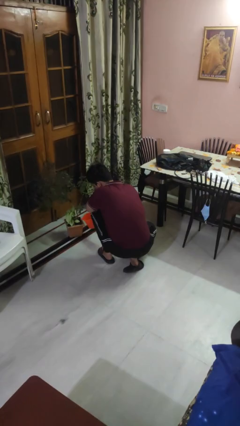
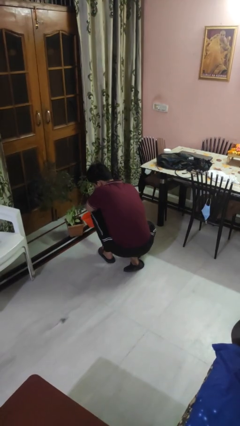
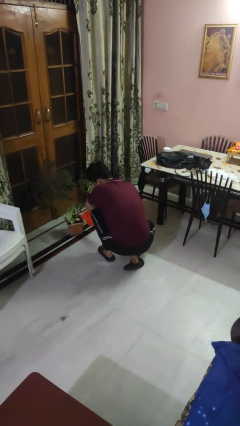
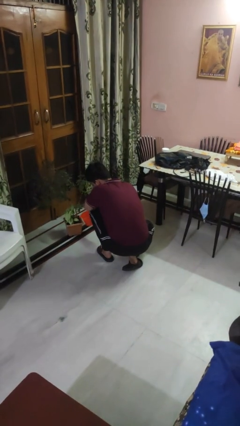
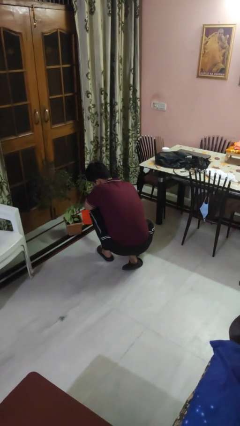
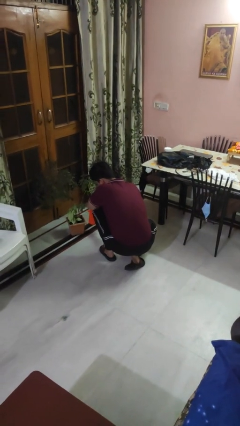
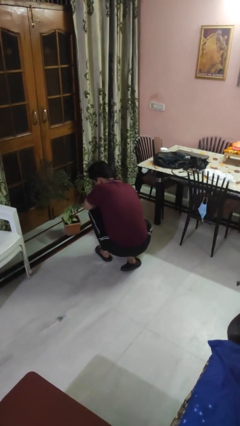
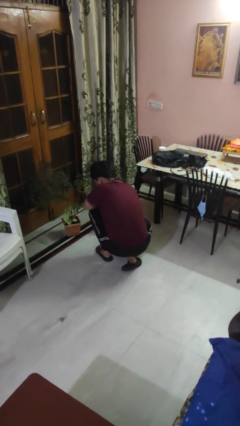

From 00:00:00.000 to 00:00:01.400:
person waters houseplant

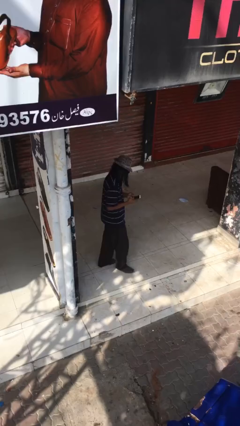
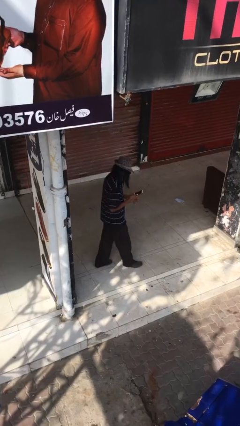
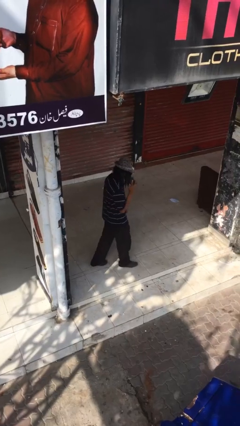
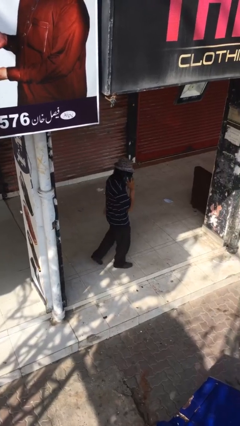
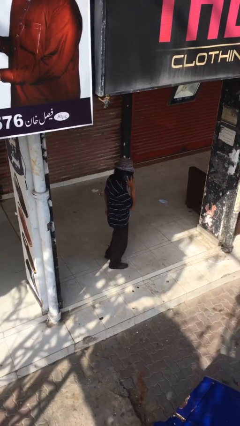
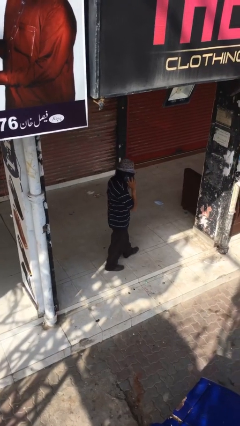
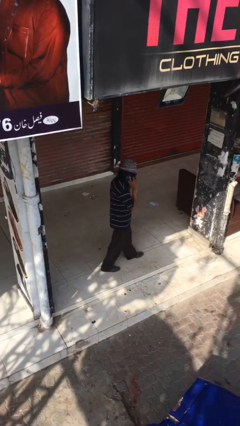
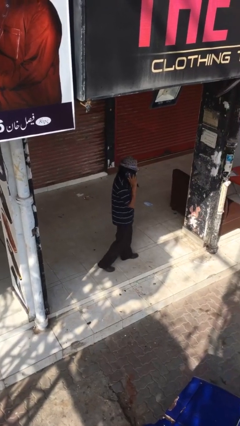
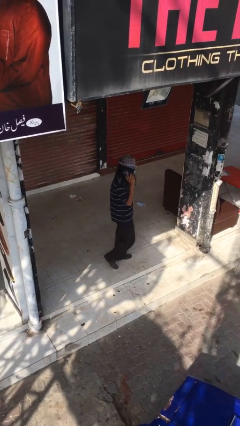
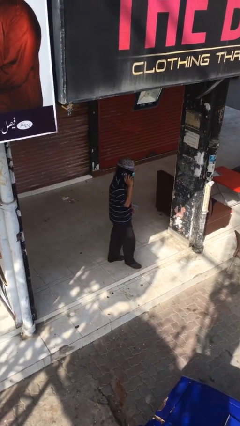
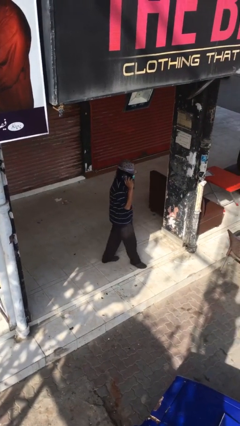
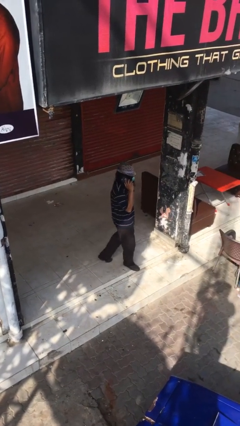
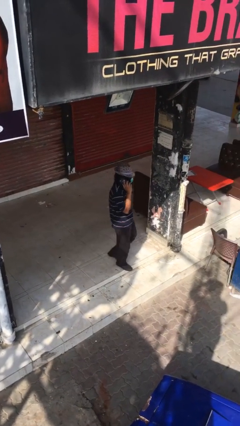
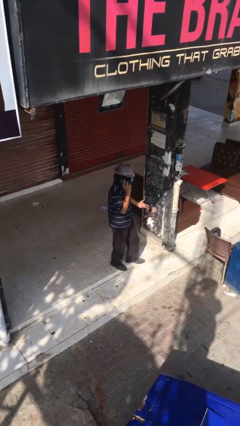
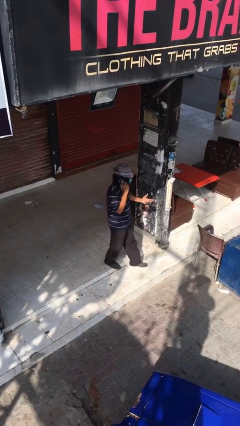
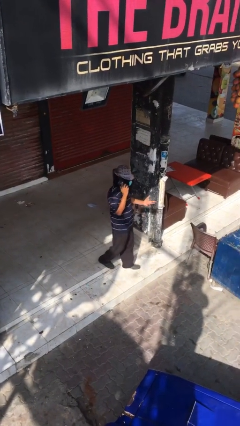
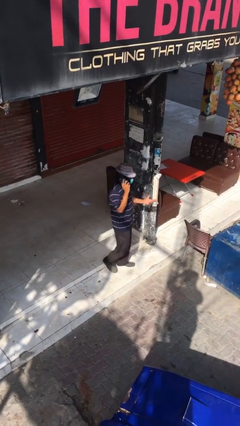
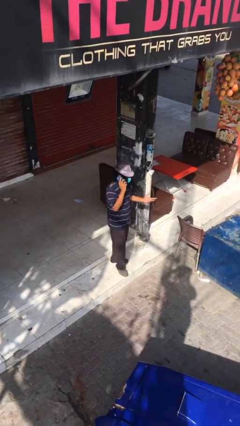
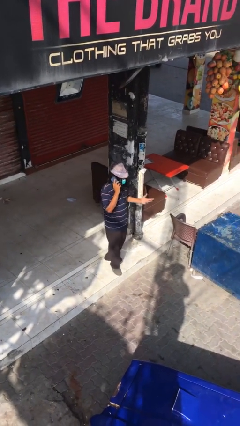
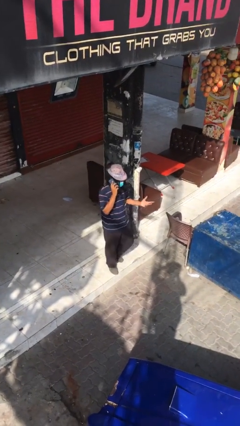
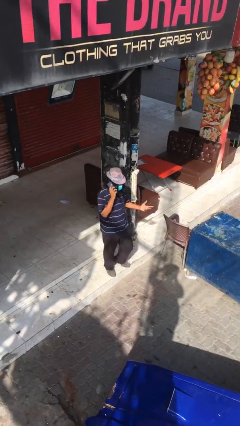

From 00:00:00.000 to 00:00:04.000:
person talks on phone

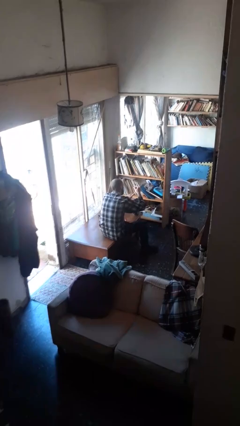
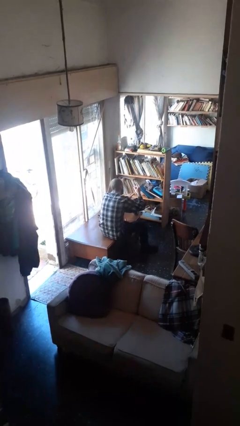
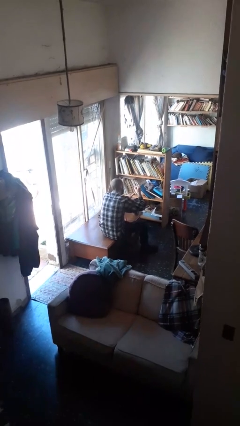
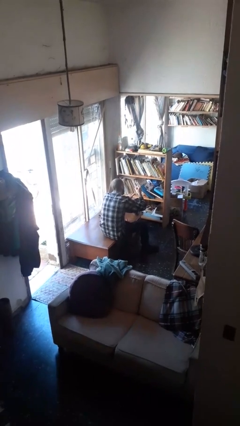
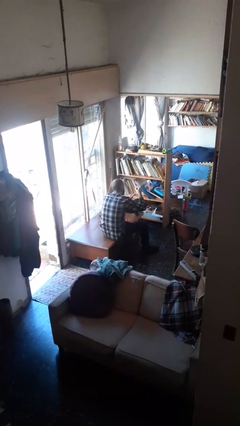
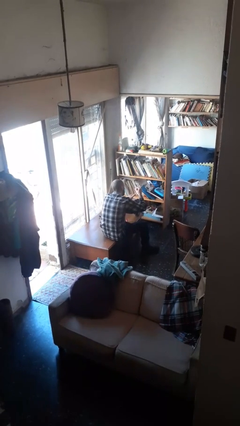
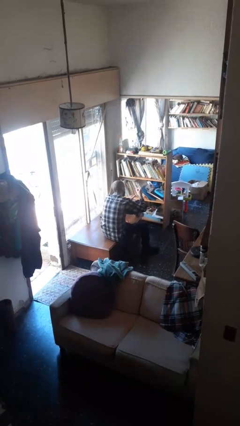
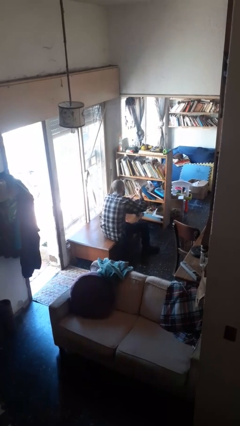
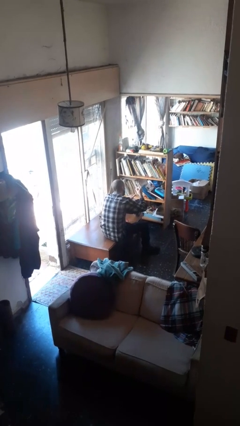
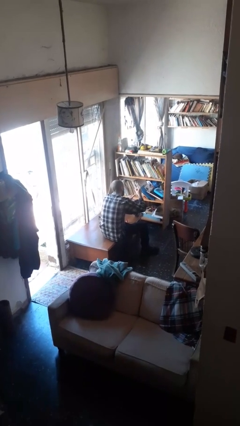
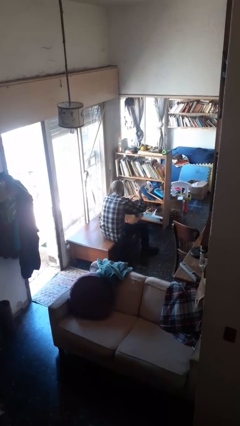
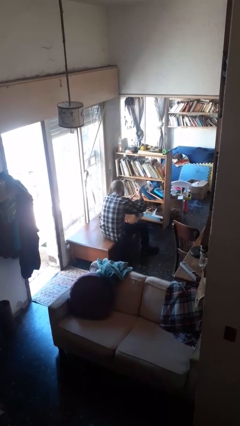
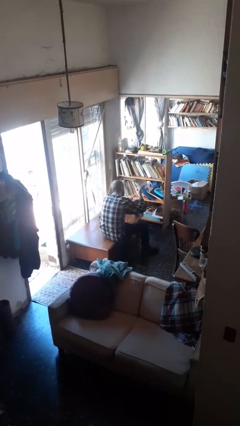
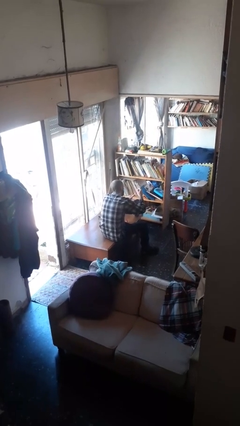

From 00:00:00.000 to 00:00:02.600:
person paints fingernails

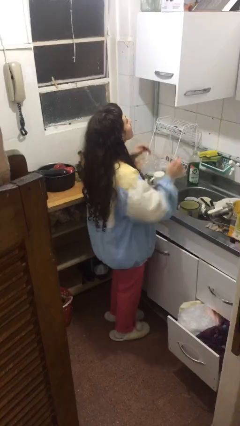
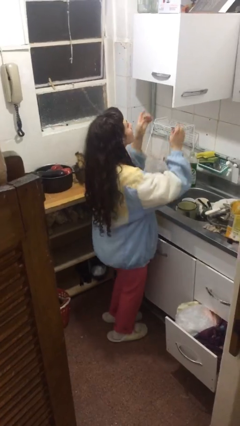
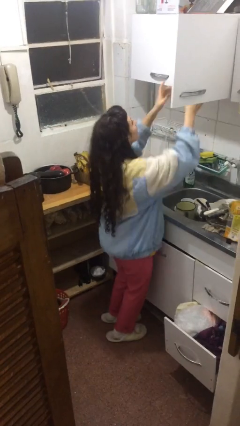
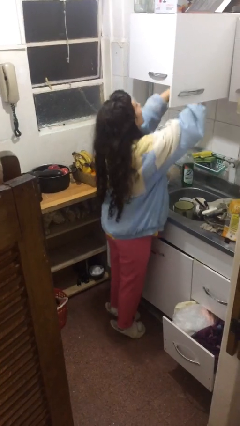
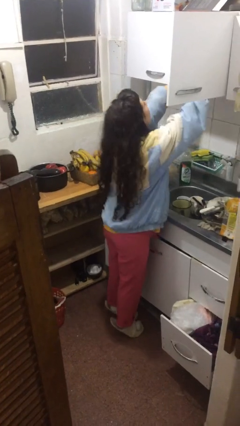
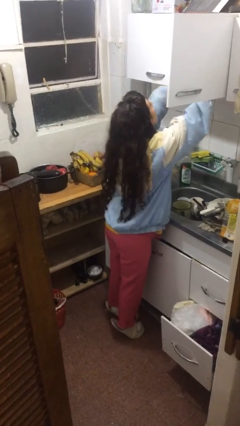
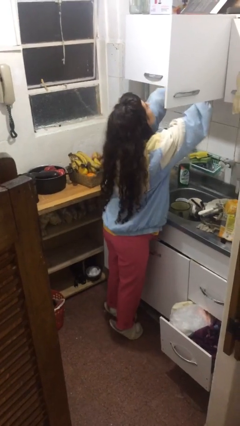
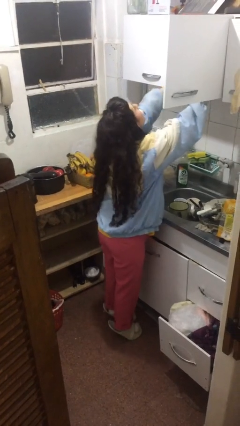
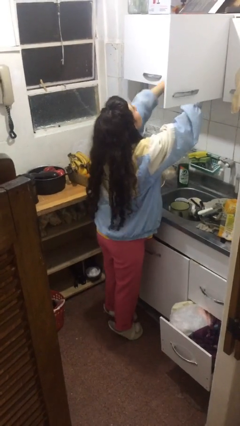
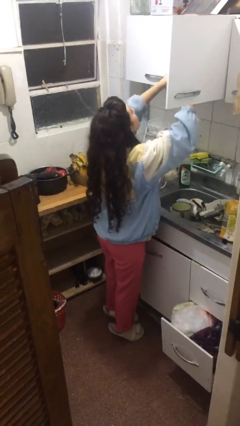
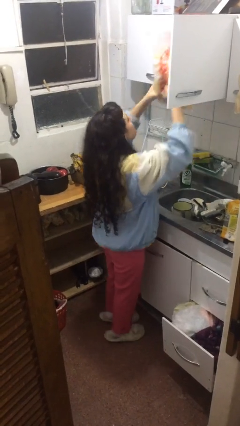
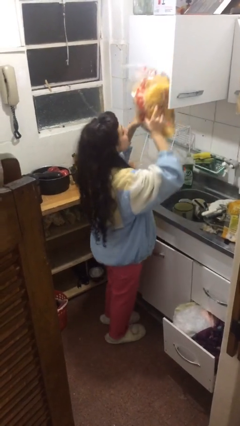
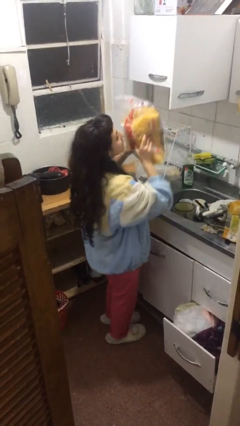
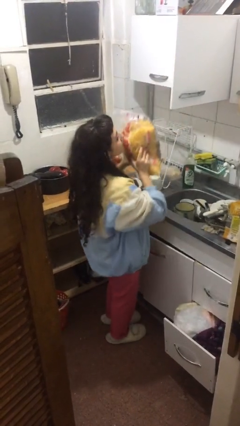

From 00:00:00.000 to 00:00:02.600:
person picks up object from cabinet

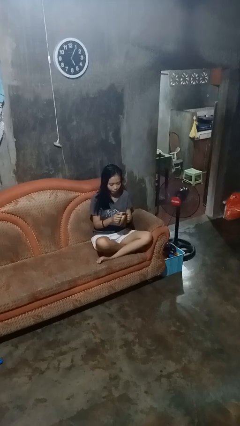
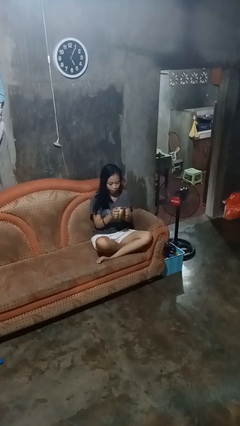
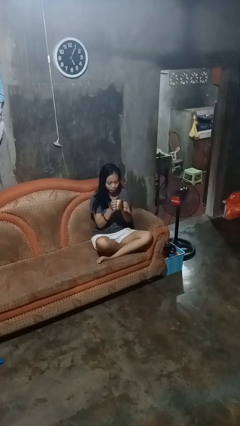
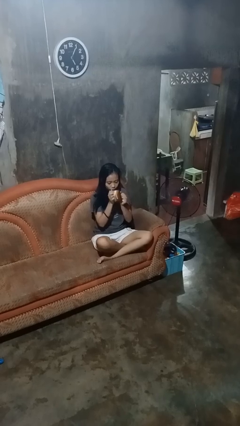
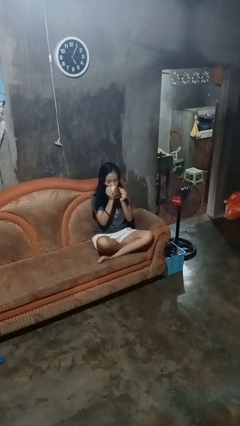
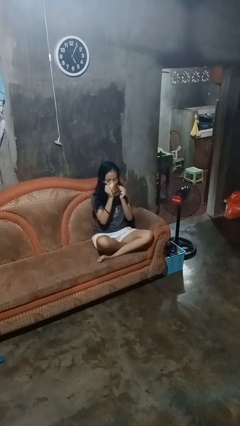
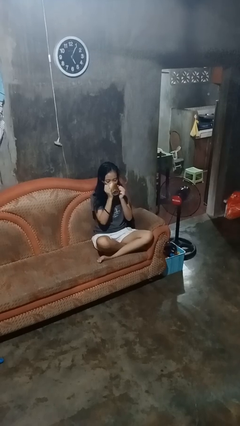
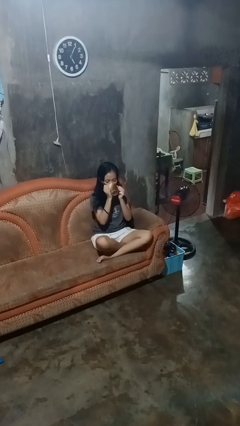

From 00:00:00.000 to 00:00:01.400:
person drinks from mug

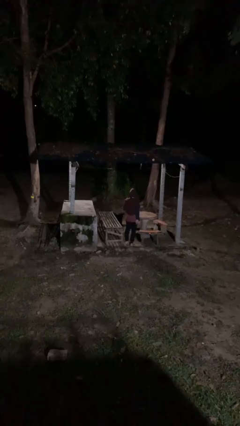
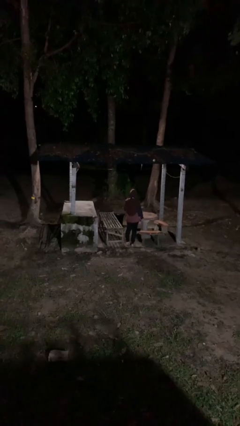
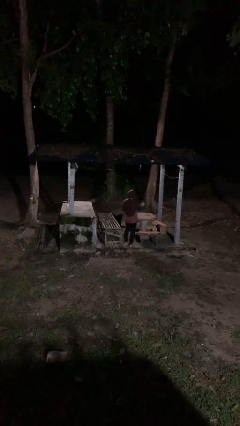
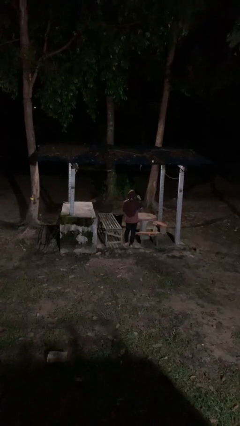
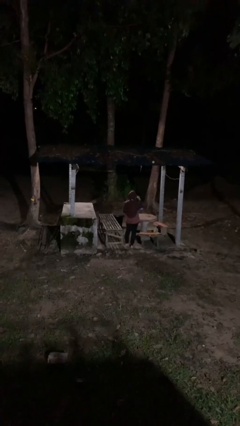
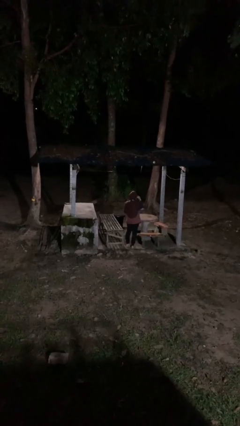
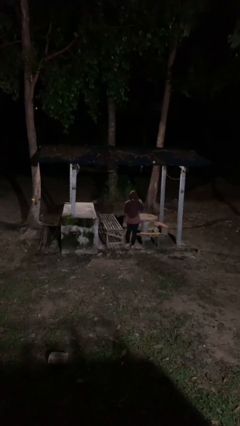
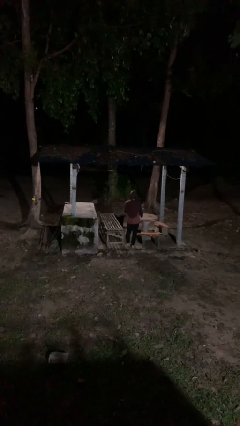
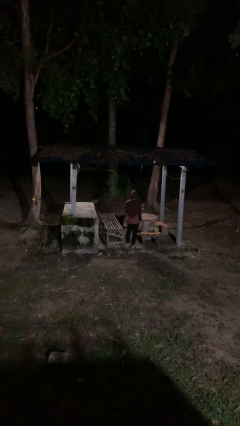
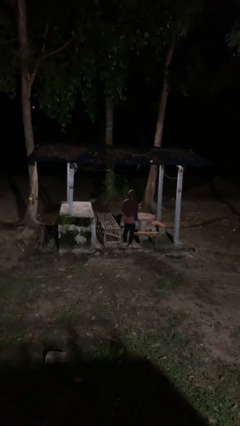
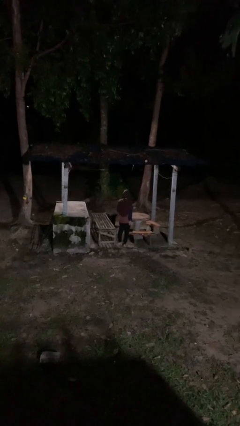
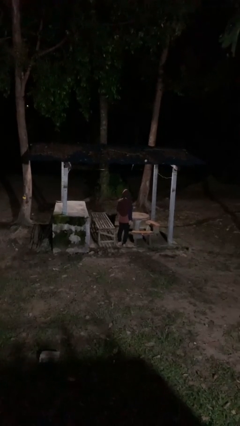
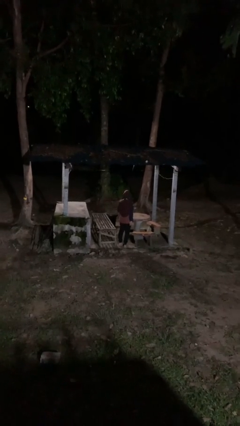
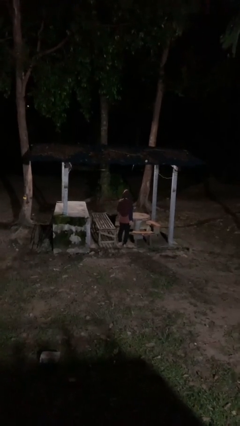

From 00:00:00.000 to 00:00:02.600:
person gestures watch closely

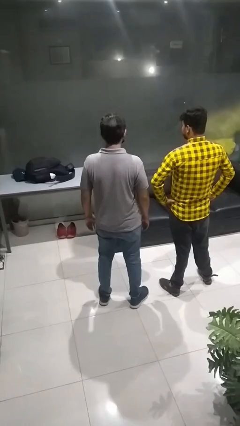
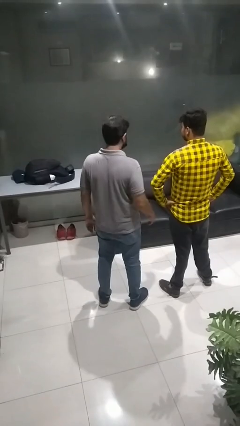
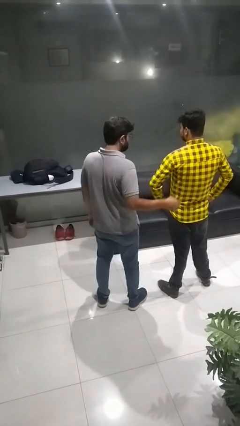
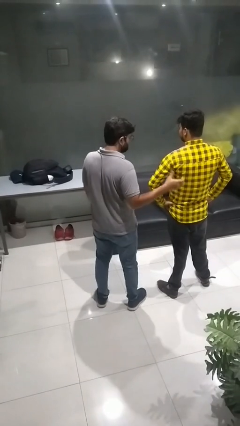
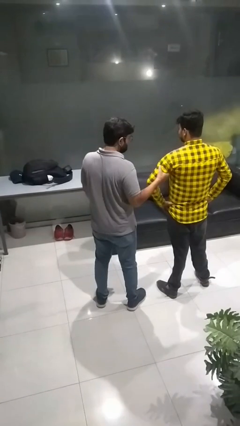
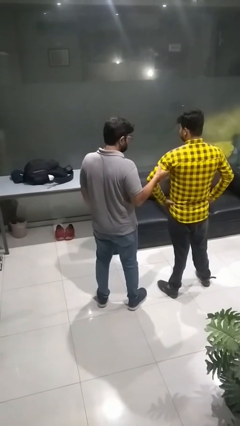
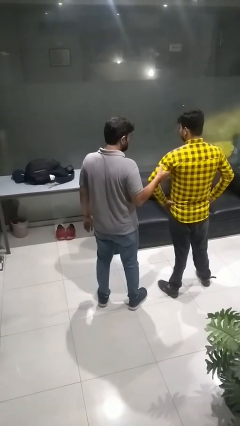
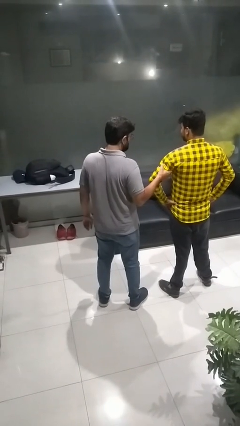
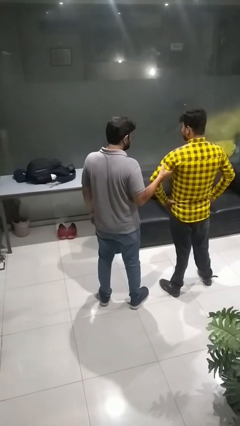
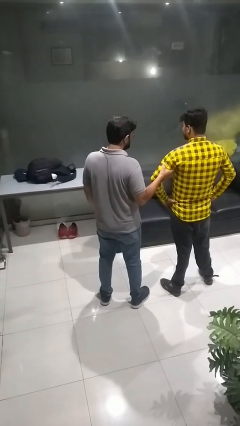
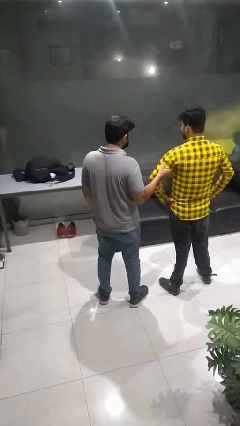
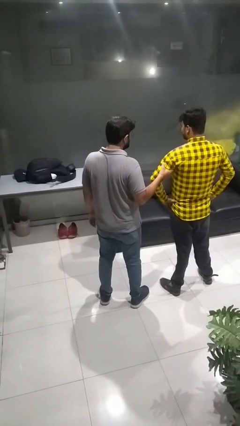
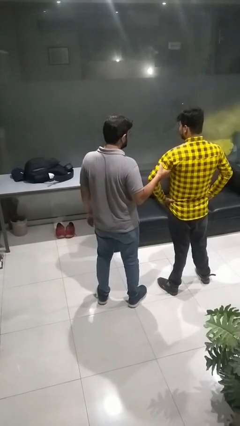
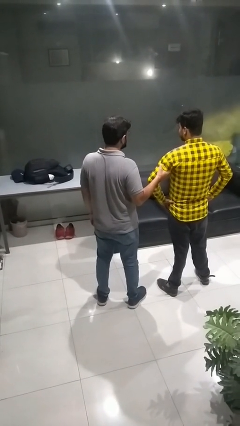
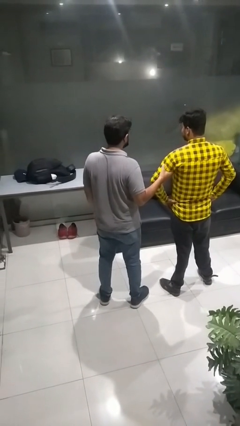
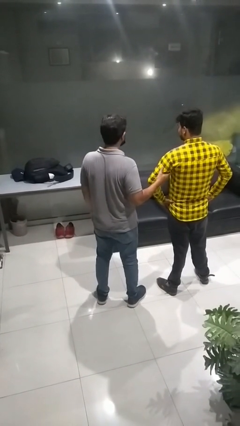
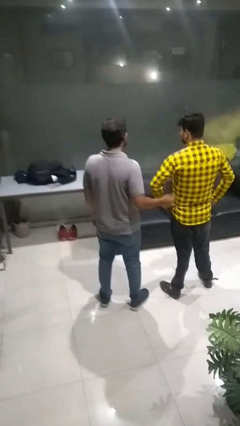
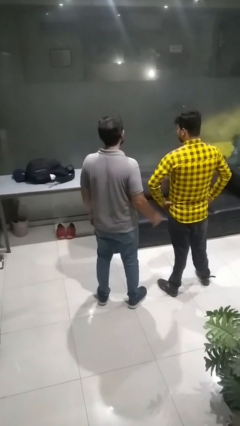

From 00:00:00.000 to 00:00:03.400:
person grabs person by bicep
